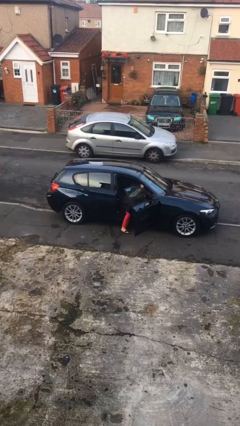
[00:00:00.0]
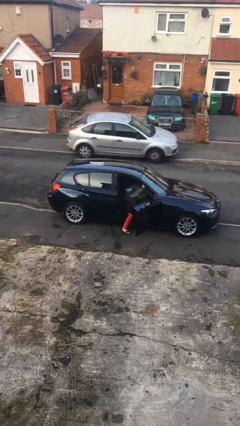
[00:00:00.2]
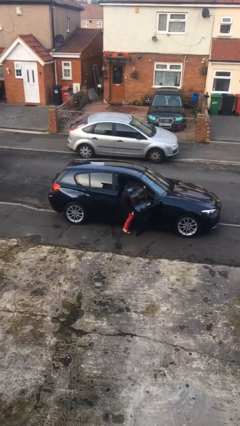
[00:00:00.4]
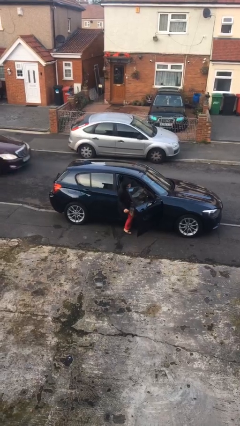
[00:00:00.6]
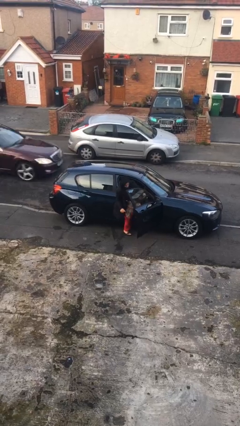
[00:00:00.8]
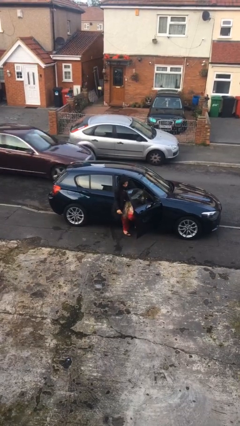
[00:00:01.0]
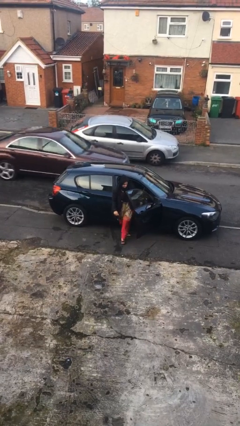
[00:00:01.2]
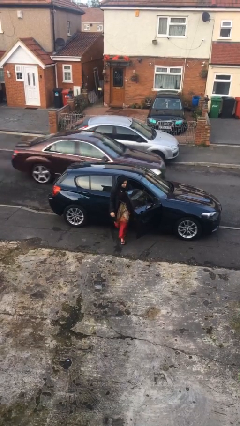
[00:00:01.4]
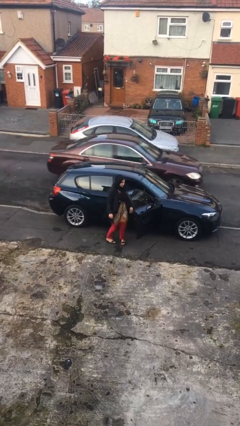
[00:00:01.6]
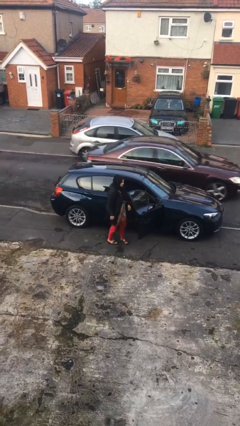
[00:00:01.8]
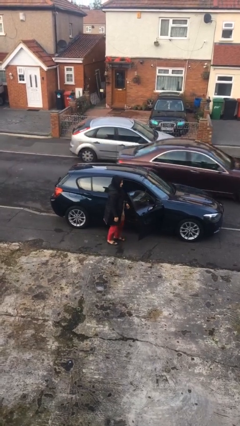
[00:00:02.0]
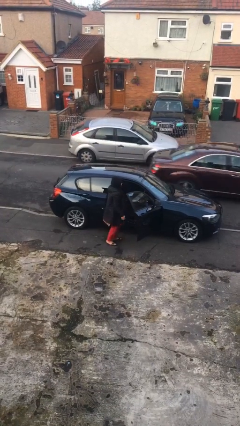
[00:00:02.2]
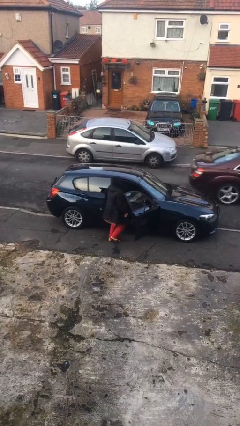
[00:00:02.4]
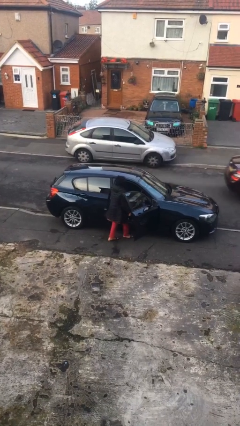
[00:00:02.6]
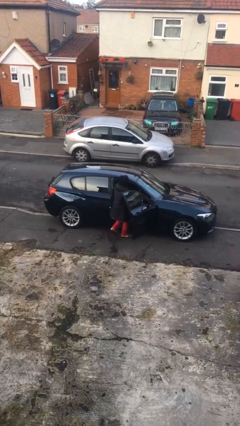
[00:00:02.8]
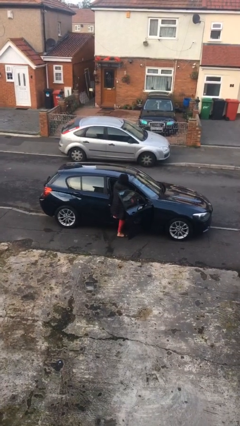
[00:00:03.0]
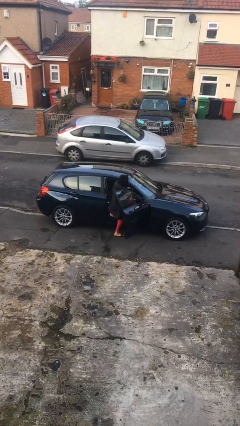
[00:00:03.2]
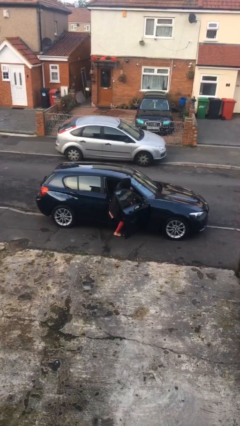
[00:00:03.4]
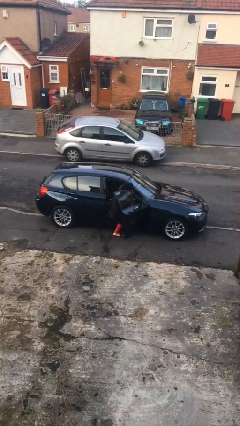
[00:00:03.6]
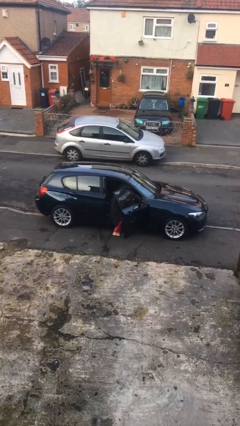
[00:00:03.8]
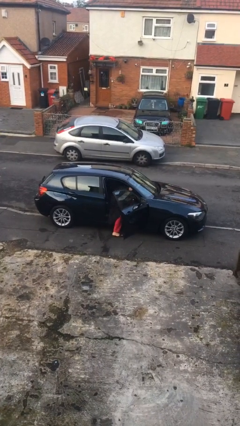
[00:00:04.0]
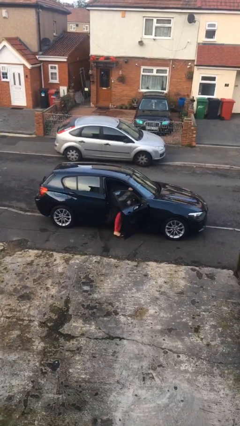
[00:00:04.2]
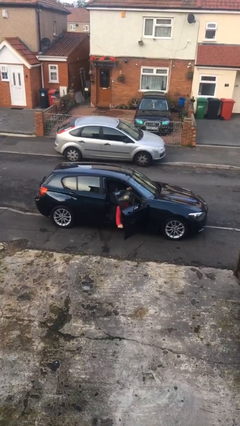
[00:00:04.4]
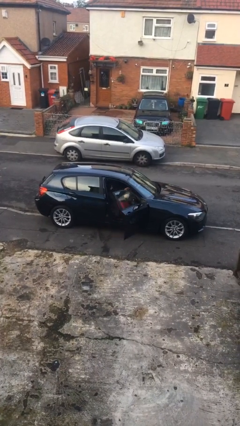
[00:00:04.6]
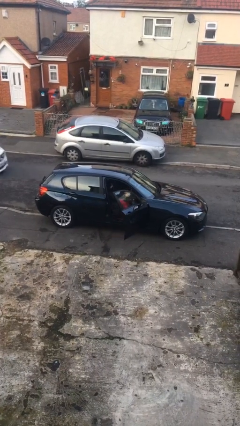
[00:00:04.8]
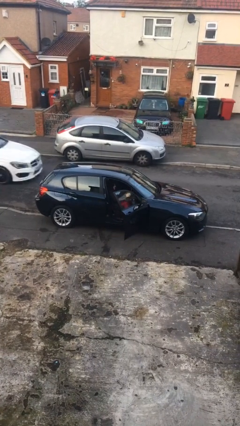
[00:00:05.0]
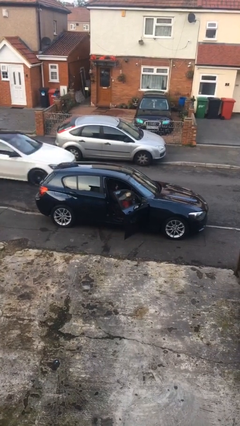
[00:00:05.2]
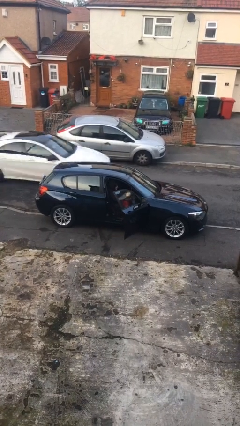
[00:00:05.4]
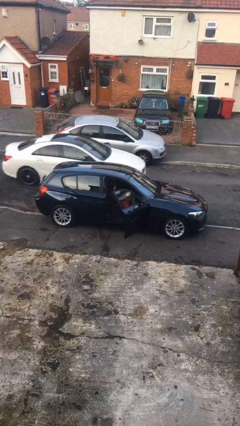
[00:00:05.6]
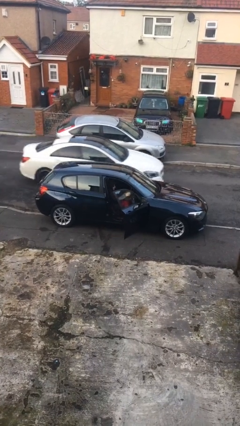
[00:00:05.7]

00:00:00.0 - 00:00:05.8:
person enters car

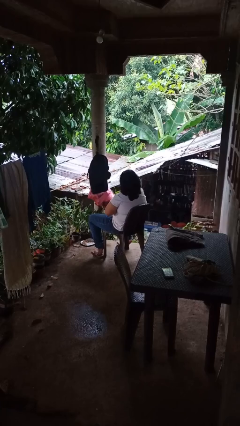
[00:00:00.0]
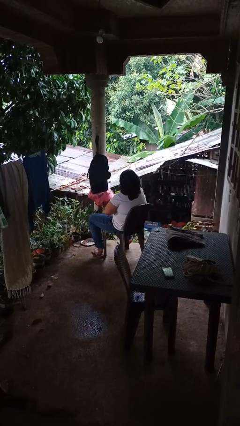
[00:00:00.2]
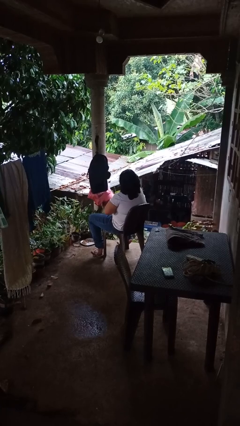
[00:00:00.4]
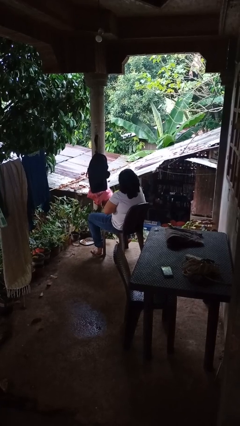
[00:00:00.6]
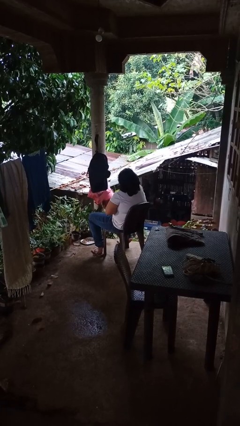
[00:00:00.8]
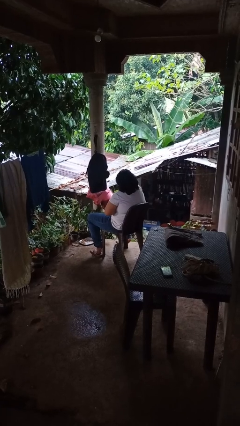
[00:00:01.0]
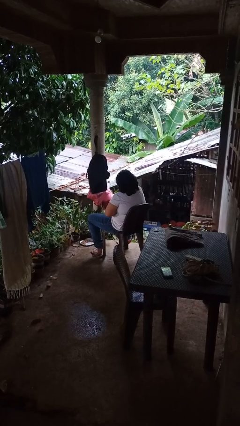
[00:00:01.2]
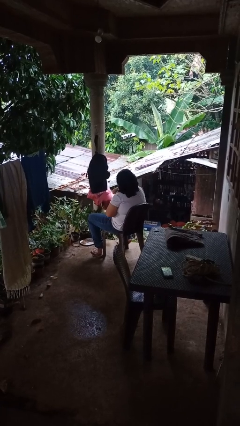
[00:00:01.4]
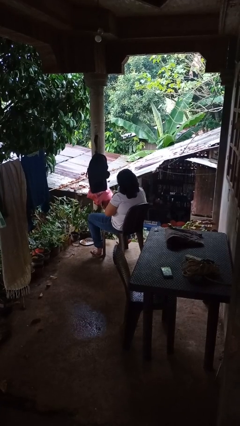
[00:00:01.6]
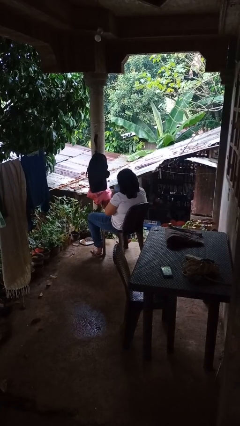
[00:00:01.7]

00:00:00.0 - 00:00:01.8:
person hugs stuffed animal

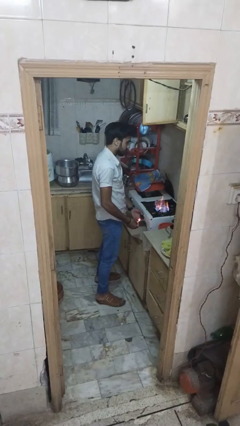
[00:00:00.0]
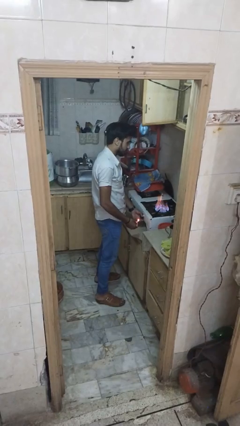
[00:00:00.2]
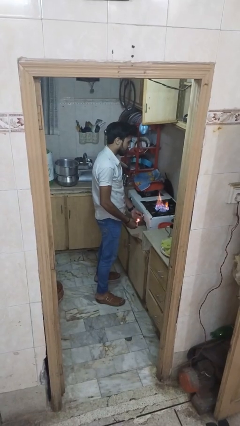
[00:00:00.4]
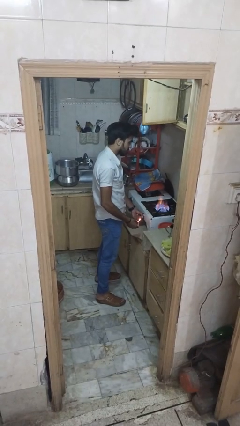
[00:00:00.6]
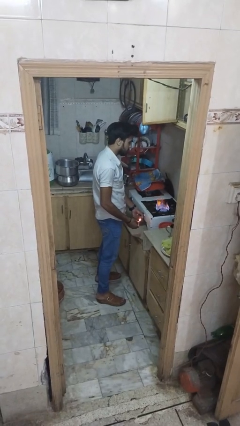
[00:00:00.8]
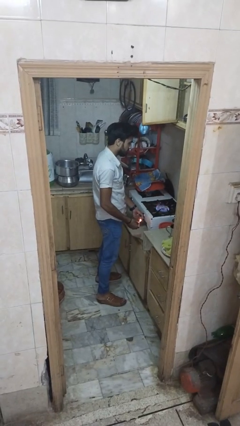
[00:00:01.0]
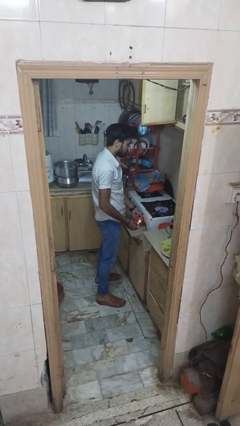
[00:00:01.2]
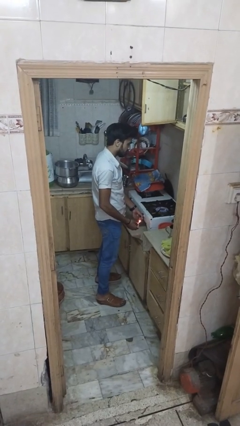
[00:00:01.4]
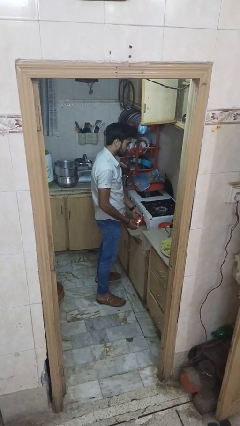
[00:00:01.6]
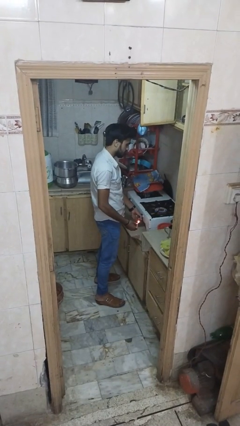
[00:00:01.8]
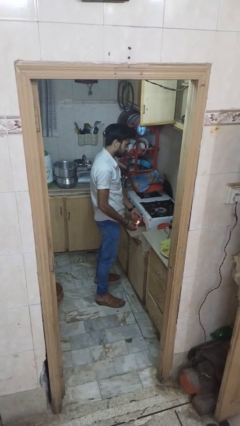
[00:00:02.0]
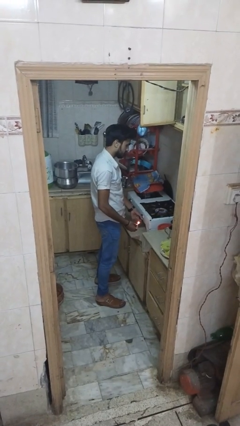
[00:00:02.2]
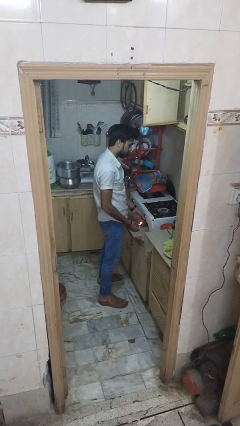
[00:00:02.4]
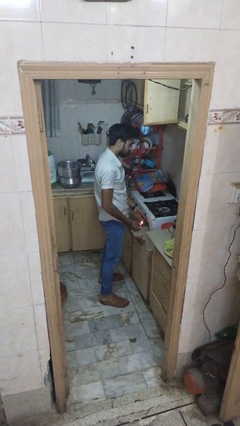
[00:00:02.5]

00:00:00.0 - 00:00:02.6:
person turns off stovetop

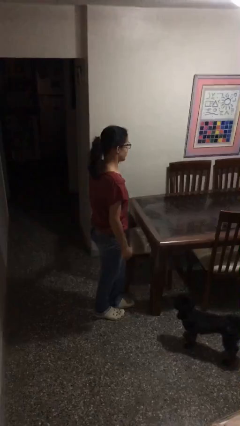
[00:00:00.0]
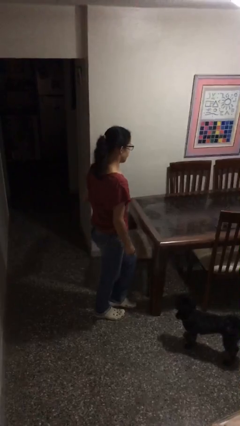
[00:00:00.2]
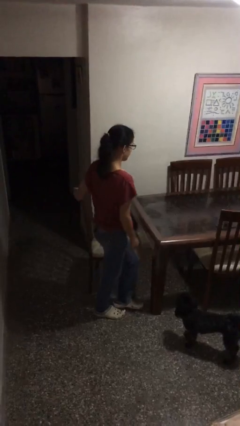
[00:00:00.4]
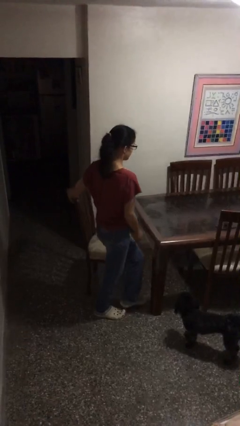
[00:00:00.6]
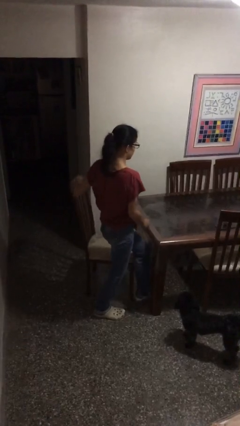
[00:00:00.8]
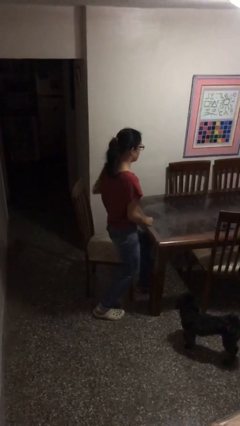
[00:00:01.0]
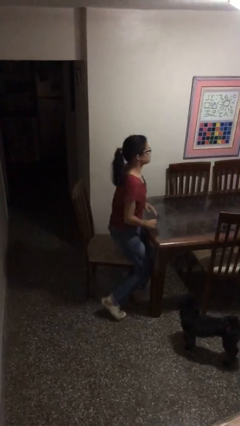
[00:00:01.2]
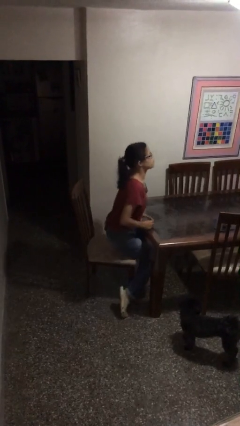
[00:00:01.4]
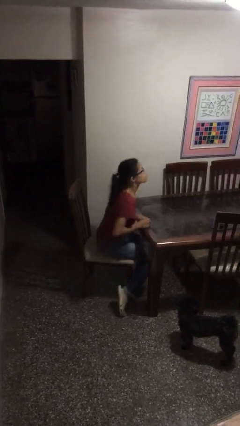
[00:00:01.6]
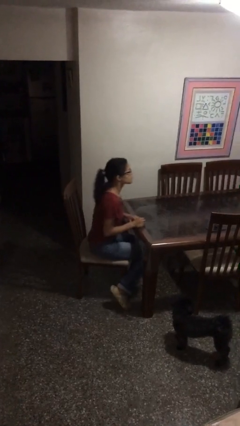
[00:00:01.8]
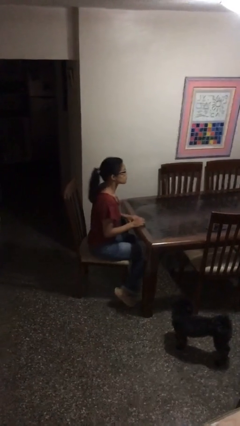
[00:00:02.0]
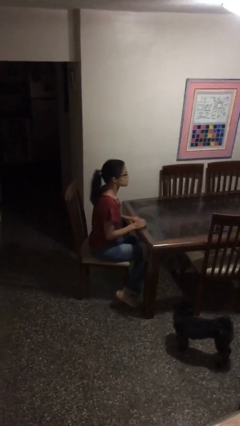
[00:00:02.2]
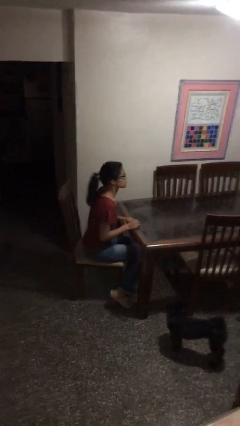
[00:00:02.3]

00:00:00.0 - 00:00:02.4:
person sits down

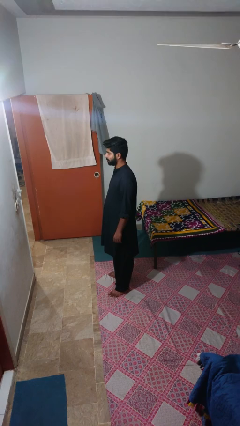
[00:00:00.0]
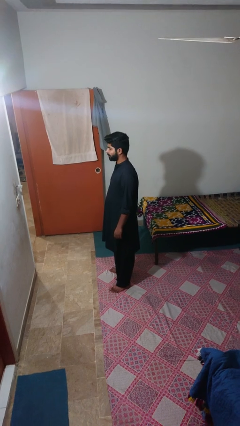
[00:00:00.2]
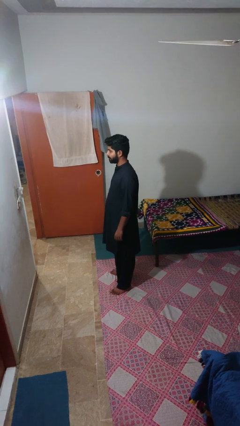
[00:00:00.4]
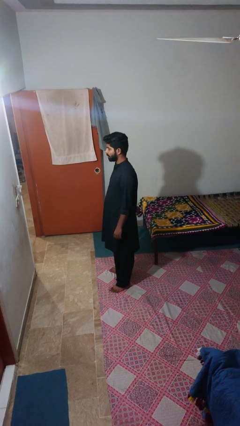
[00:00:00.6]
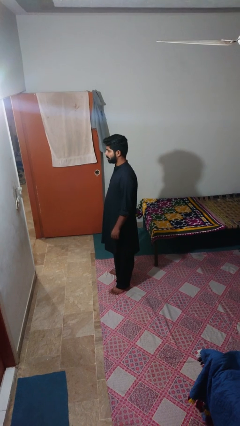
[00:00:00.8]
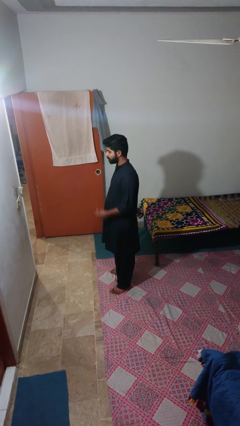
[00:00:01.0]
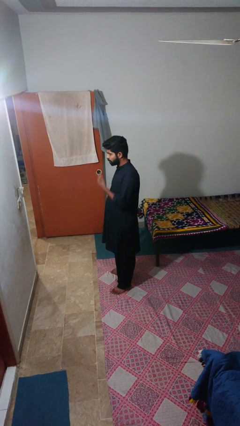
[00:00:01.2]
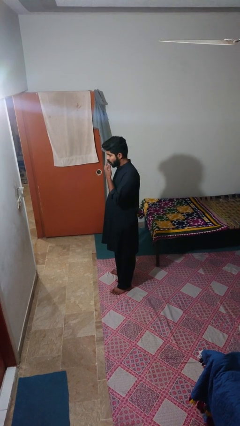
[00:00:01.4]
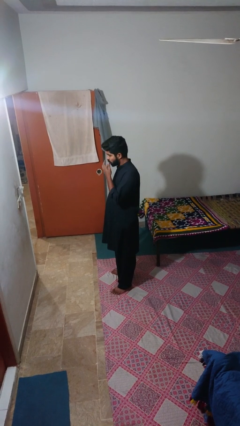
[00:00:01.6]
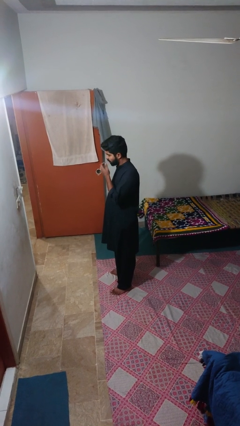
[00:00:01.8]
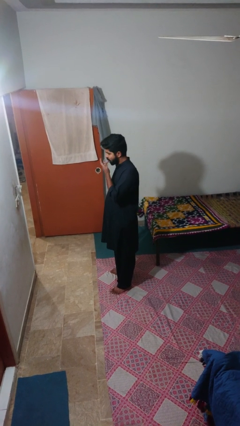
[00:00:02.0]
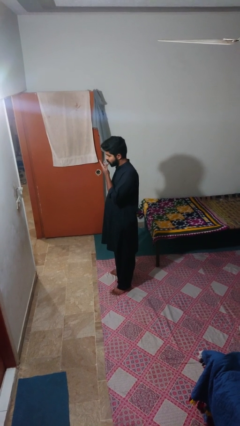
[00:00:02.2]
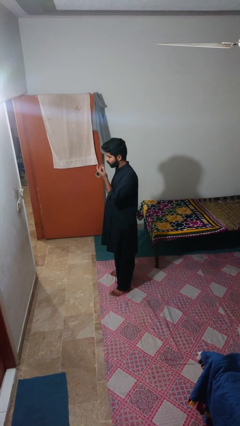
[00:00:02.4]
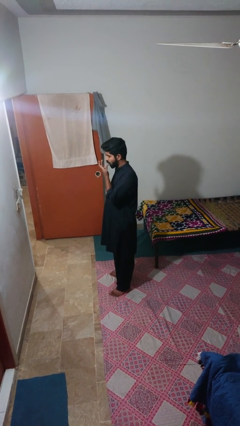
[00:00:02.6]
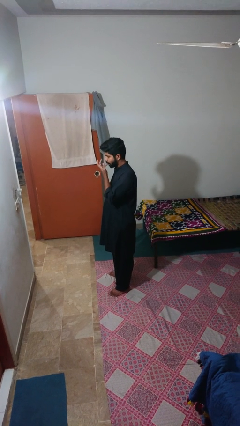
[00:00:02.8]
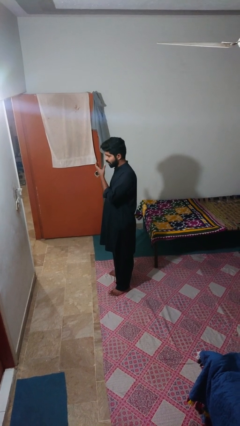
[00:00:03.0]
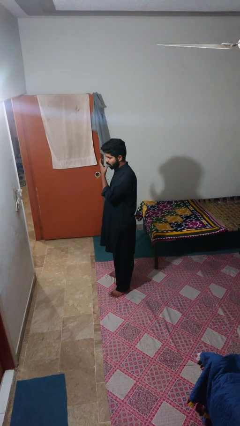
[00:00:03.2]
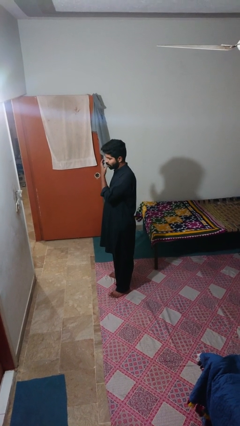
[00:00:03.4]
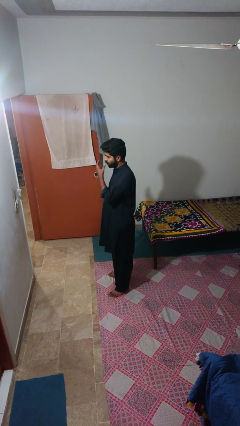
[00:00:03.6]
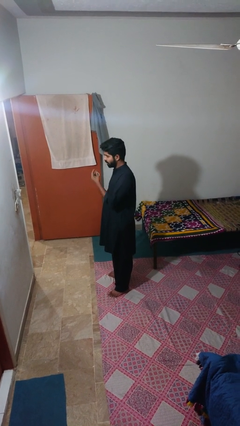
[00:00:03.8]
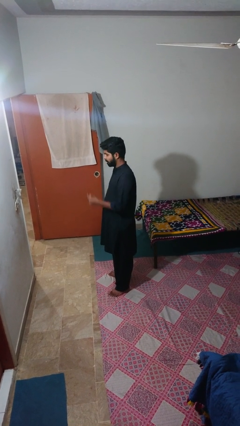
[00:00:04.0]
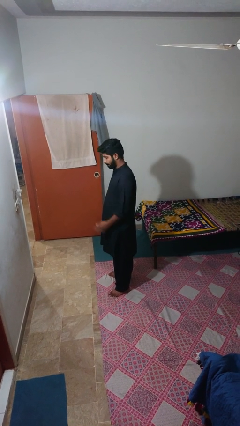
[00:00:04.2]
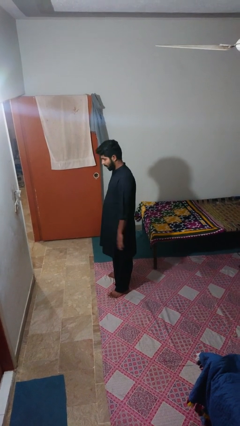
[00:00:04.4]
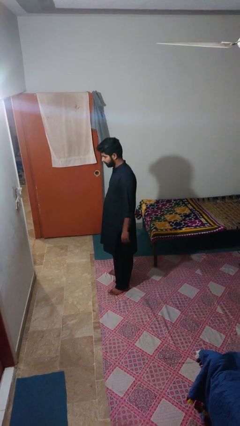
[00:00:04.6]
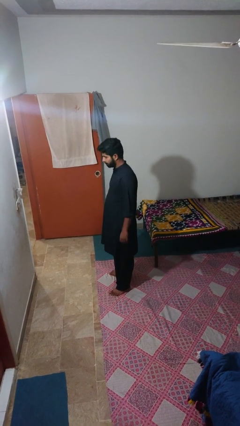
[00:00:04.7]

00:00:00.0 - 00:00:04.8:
person licks fingers
